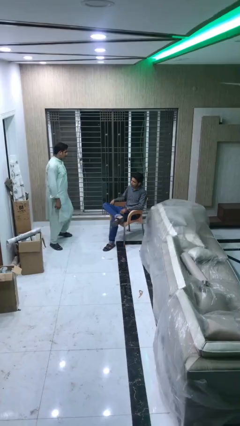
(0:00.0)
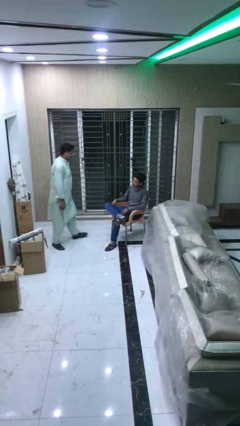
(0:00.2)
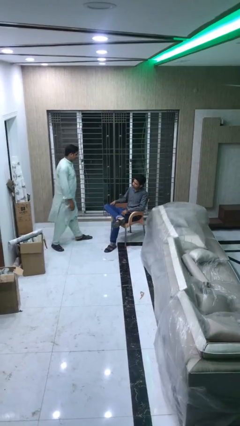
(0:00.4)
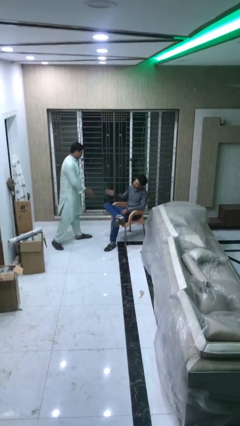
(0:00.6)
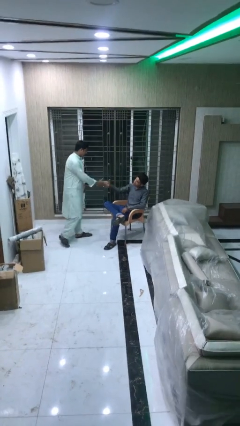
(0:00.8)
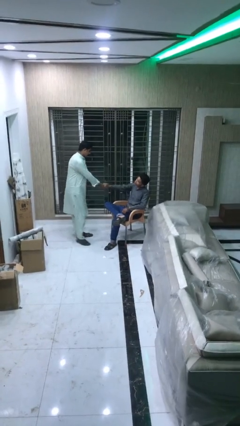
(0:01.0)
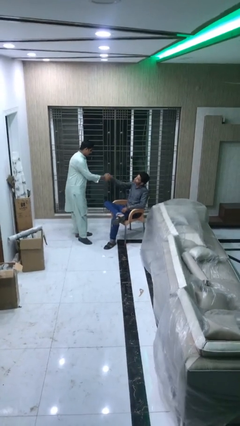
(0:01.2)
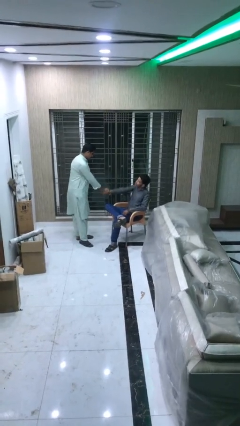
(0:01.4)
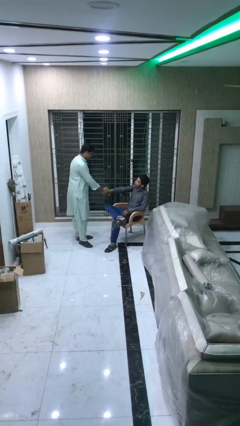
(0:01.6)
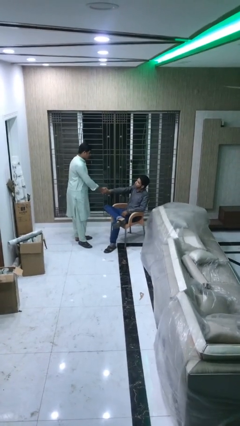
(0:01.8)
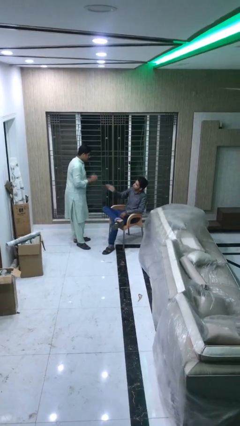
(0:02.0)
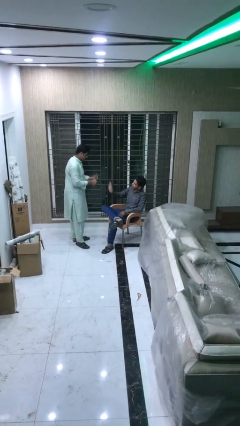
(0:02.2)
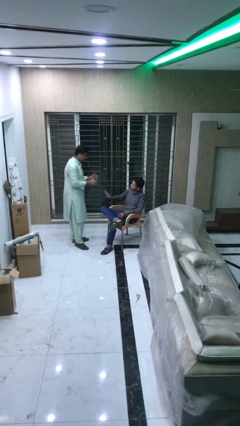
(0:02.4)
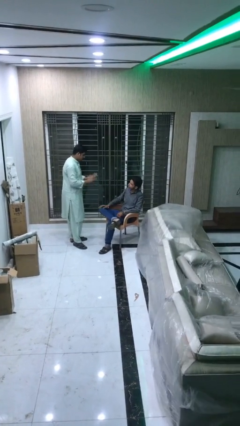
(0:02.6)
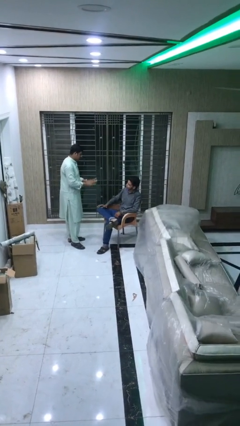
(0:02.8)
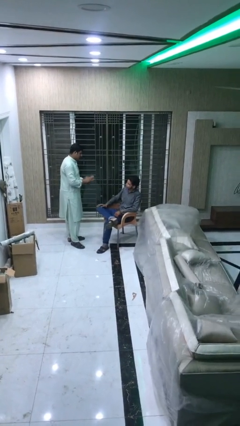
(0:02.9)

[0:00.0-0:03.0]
person shakes hand

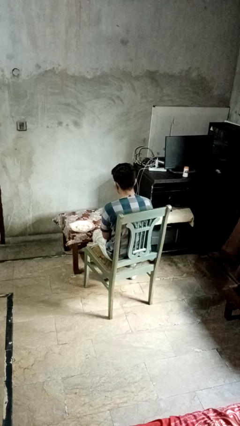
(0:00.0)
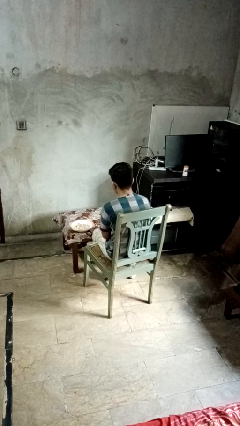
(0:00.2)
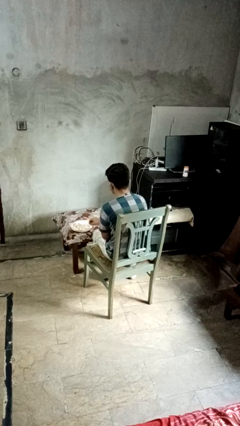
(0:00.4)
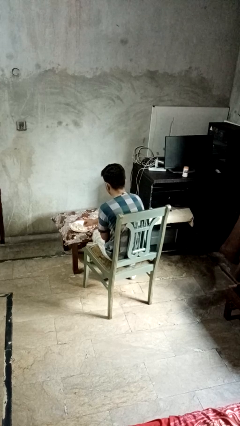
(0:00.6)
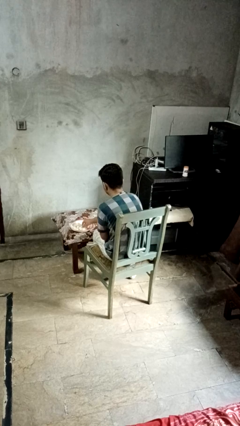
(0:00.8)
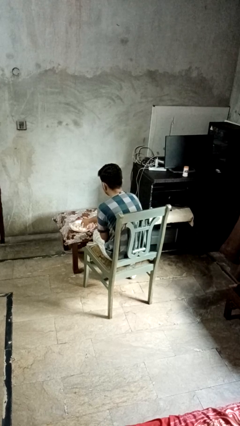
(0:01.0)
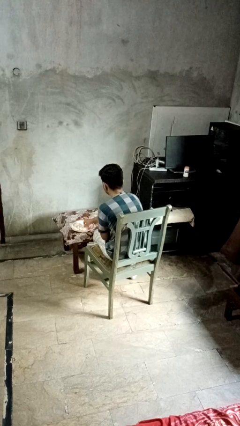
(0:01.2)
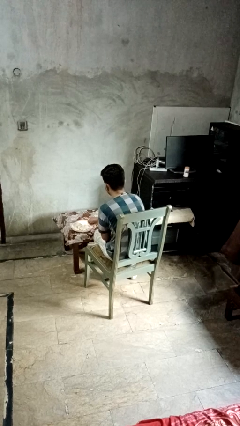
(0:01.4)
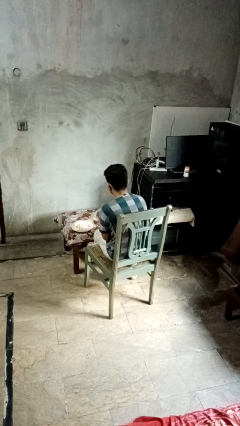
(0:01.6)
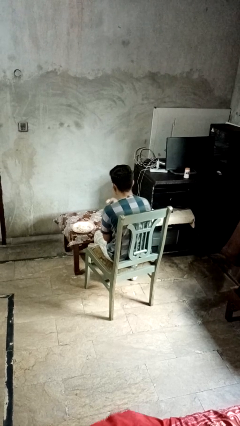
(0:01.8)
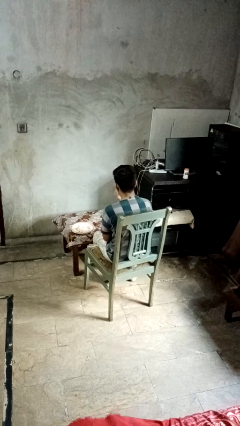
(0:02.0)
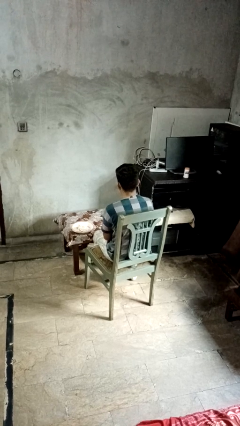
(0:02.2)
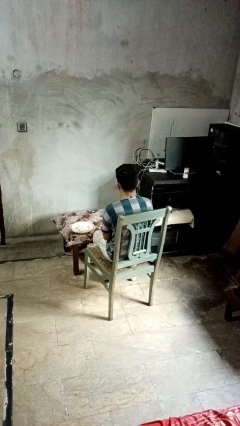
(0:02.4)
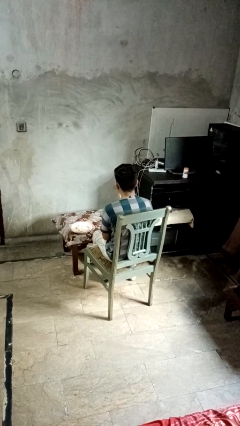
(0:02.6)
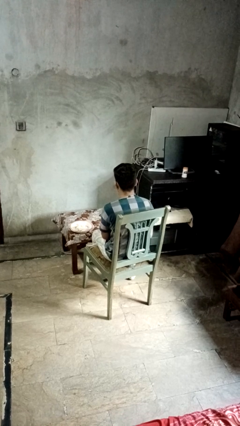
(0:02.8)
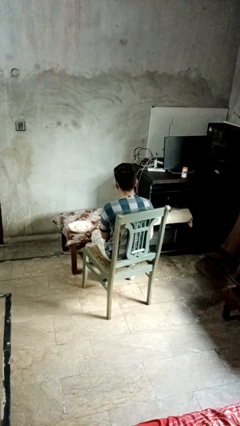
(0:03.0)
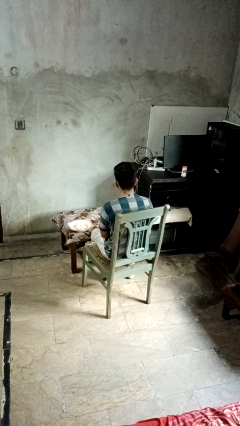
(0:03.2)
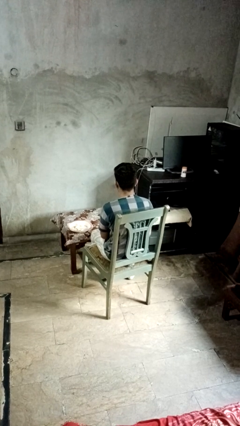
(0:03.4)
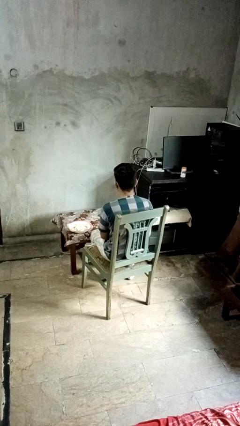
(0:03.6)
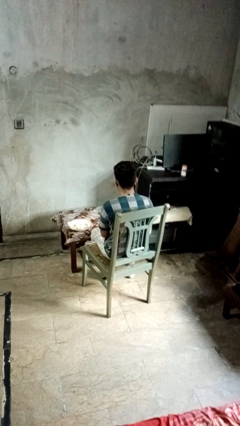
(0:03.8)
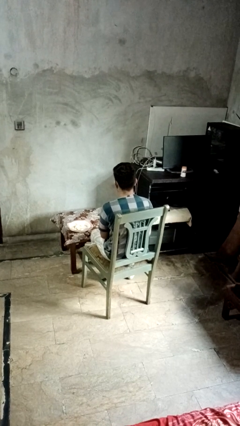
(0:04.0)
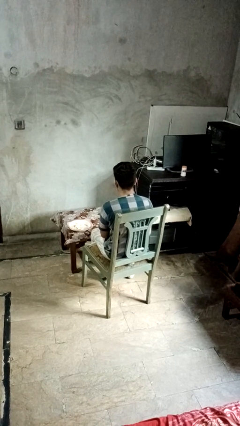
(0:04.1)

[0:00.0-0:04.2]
person eats with hands

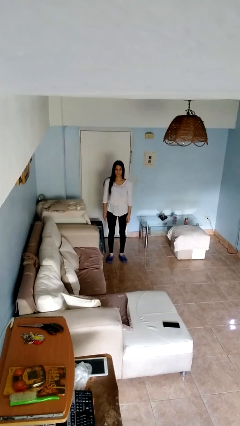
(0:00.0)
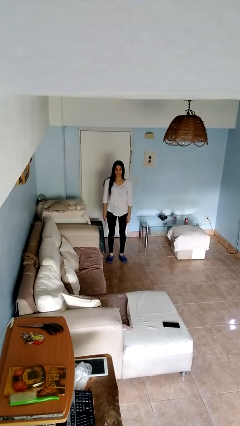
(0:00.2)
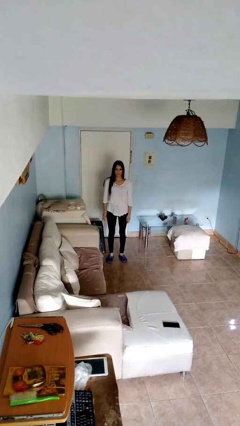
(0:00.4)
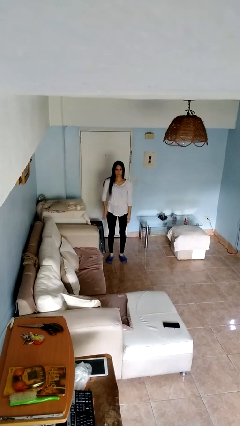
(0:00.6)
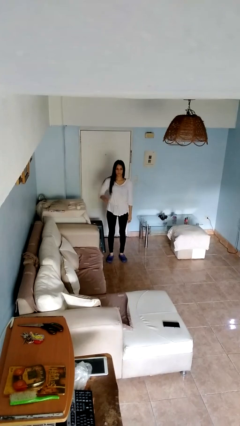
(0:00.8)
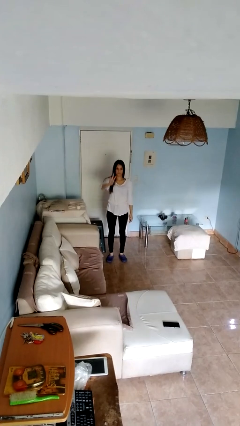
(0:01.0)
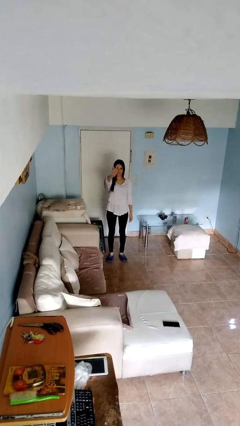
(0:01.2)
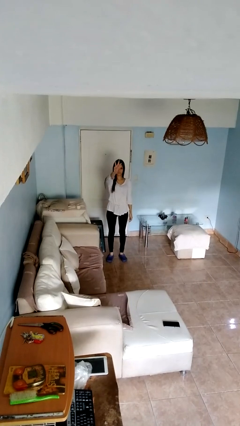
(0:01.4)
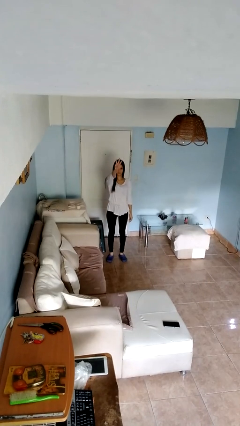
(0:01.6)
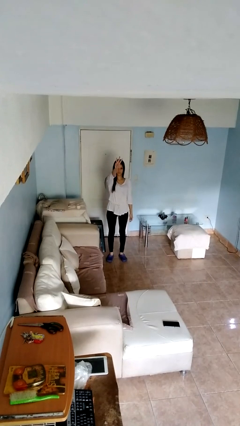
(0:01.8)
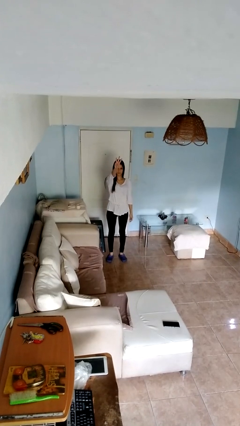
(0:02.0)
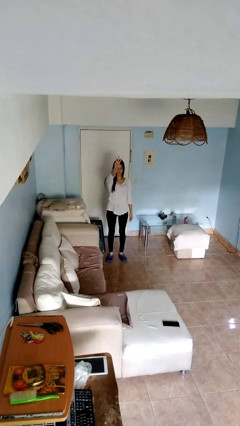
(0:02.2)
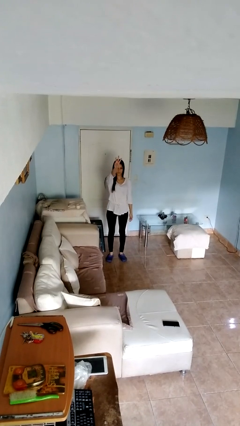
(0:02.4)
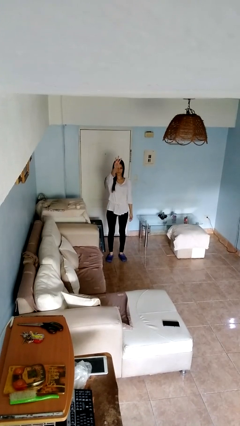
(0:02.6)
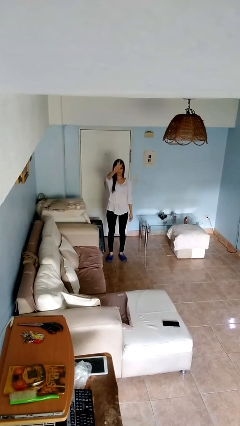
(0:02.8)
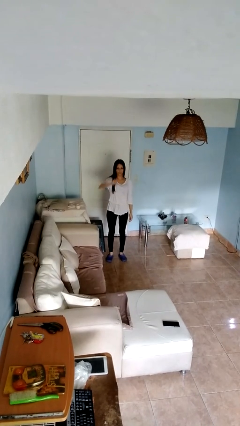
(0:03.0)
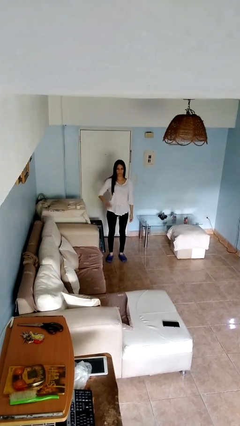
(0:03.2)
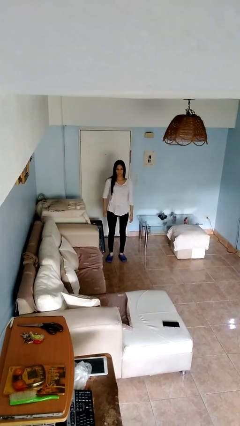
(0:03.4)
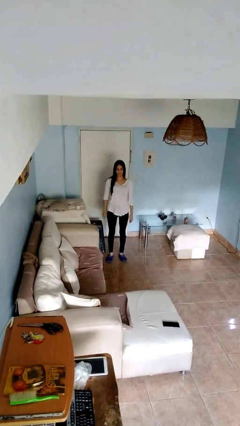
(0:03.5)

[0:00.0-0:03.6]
person gestures number three

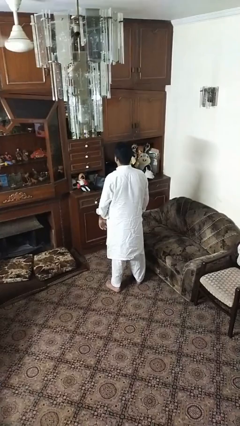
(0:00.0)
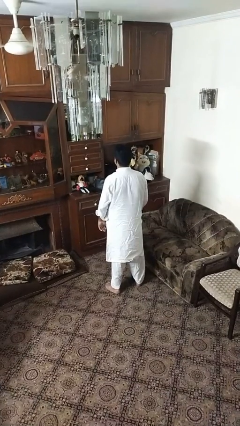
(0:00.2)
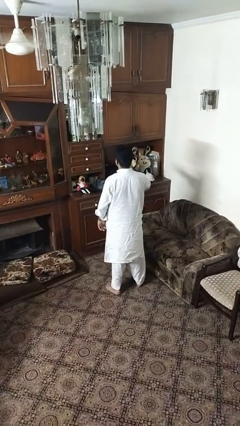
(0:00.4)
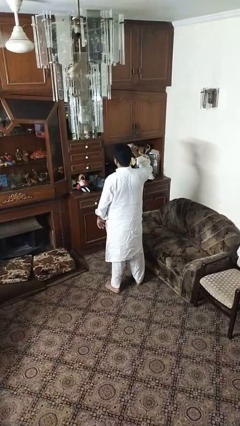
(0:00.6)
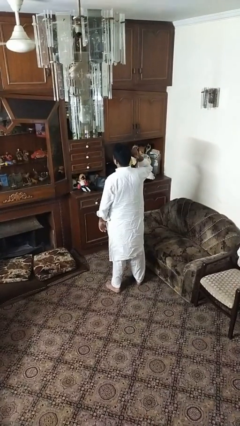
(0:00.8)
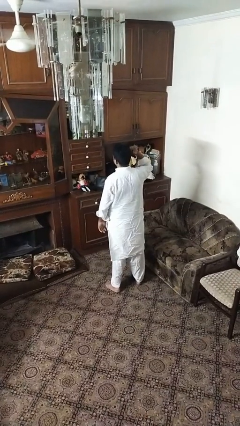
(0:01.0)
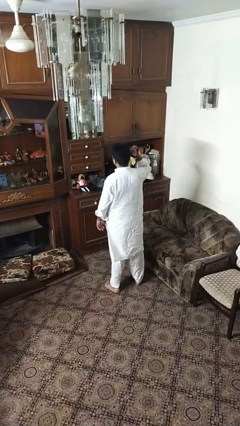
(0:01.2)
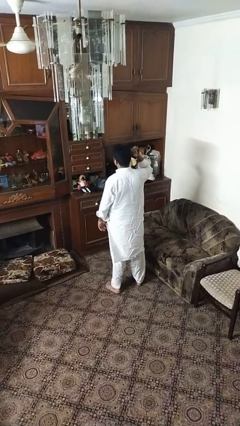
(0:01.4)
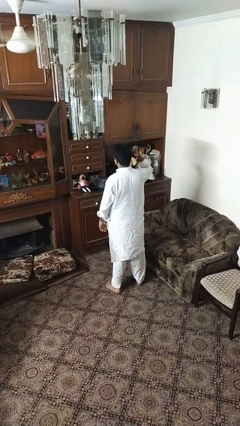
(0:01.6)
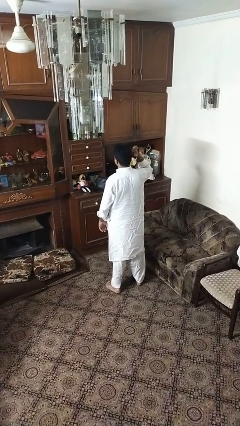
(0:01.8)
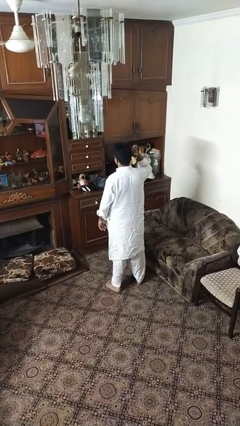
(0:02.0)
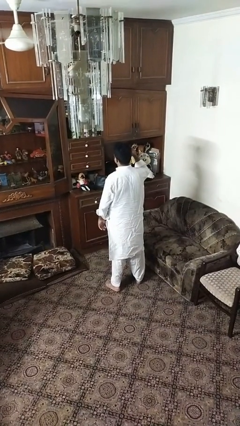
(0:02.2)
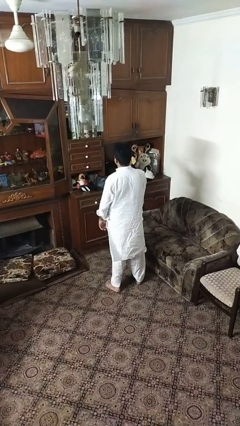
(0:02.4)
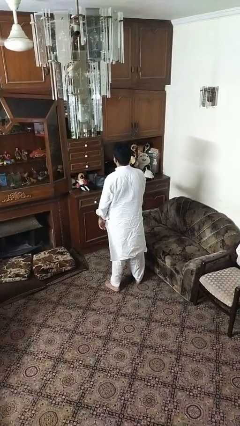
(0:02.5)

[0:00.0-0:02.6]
person gestures behind me

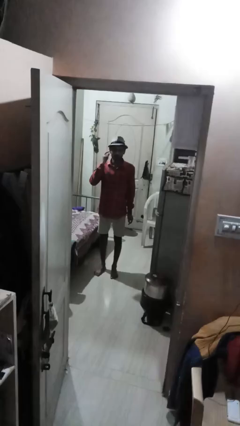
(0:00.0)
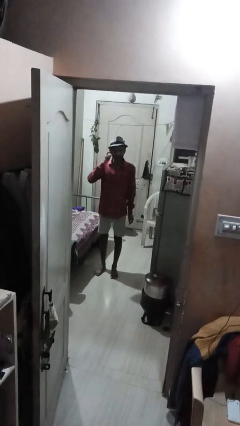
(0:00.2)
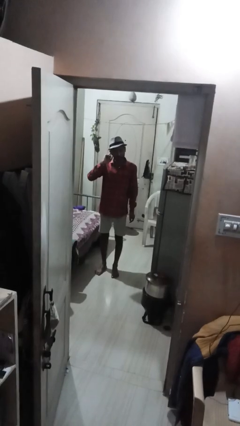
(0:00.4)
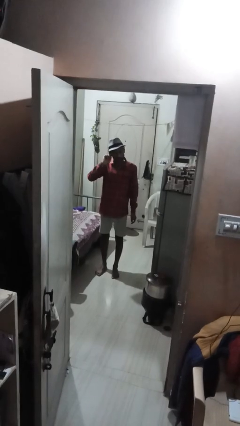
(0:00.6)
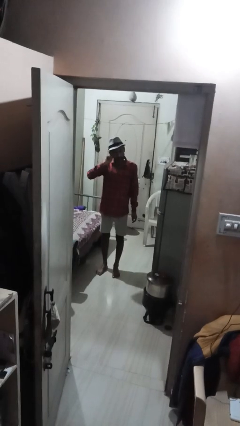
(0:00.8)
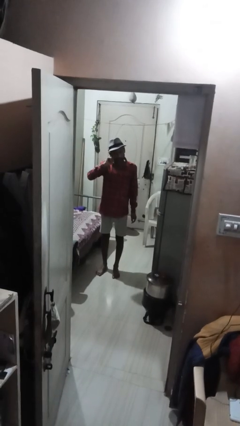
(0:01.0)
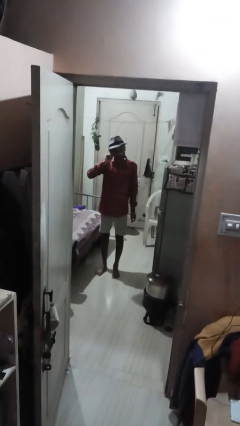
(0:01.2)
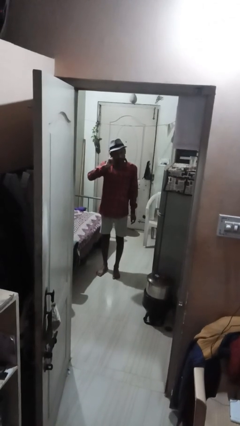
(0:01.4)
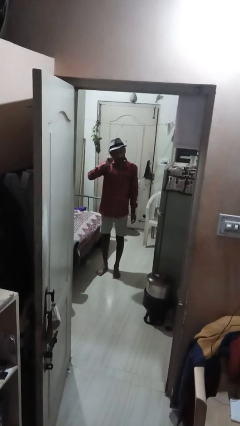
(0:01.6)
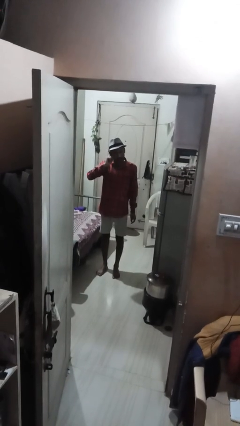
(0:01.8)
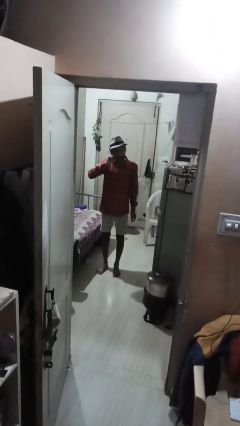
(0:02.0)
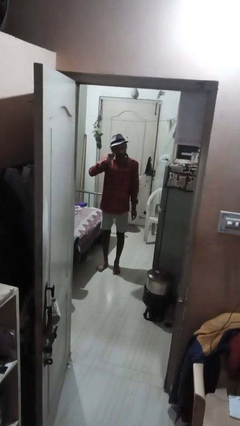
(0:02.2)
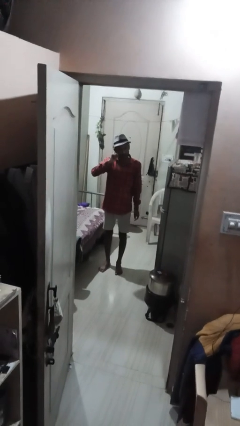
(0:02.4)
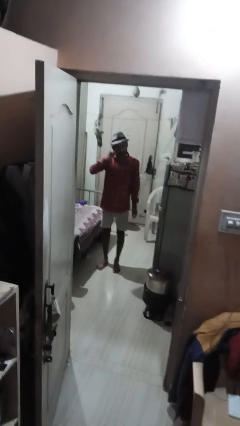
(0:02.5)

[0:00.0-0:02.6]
person touches earlobe

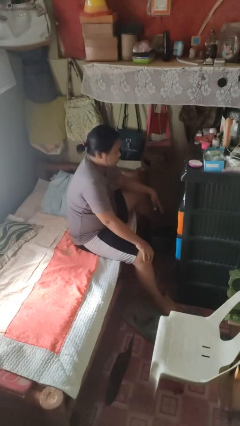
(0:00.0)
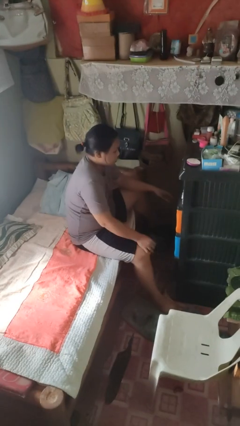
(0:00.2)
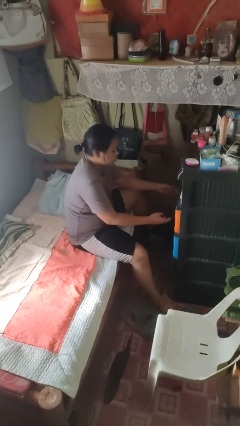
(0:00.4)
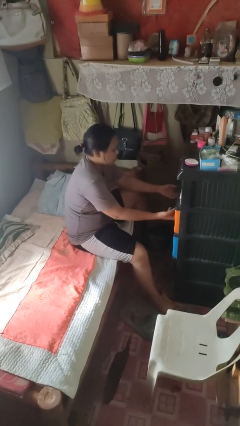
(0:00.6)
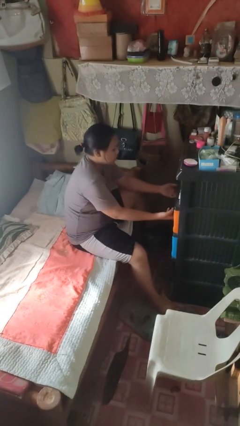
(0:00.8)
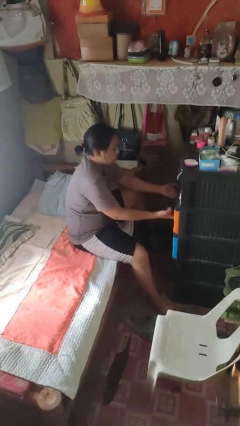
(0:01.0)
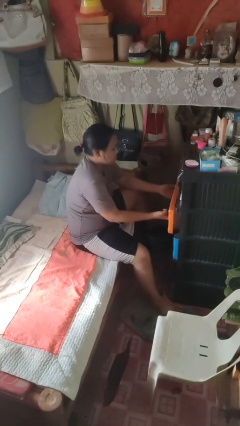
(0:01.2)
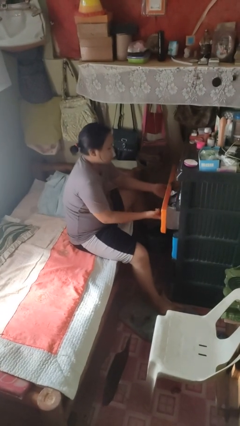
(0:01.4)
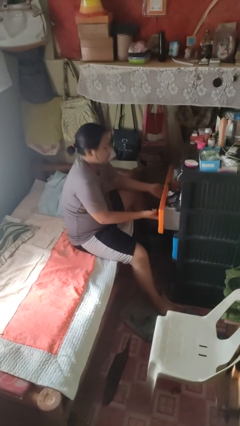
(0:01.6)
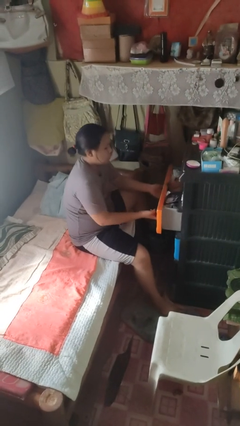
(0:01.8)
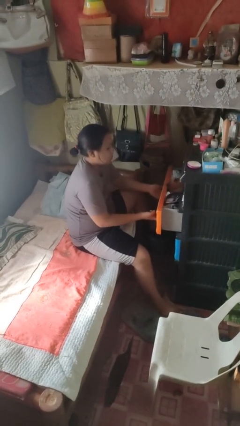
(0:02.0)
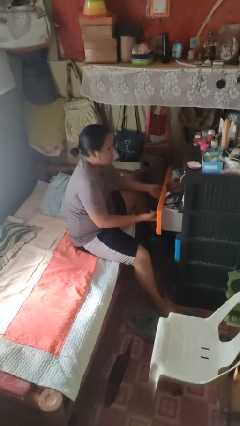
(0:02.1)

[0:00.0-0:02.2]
person opens dresser drawer
